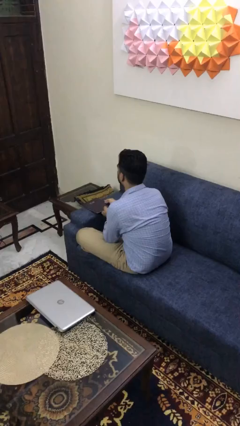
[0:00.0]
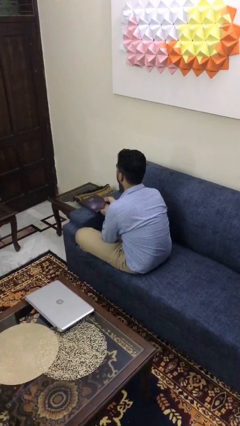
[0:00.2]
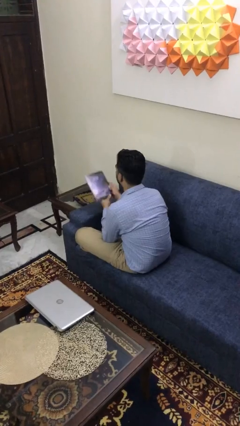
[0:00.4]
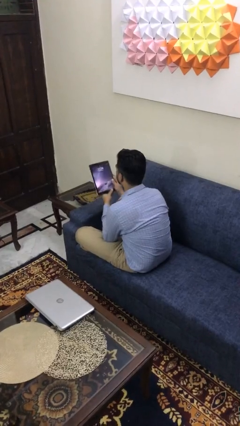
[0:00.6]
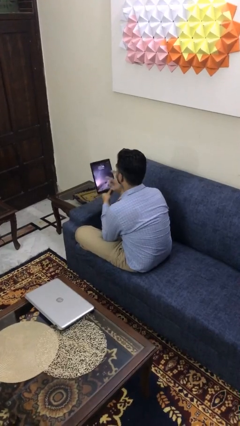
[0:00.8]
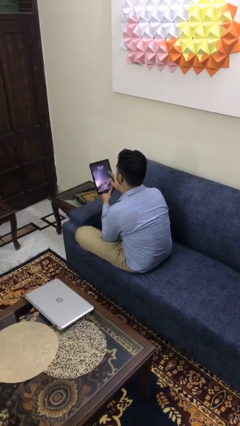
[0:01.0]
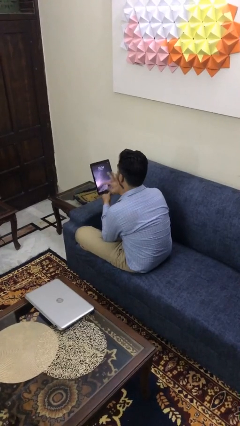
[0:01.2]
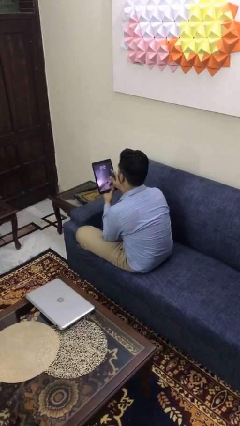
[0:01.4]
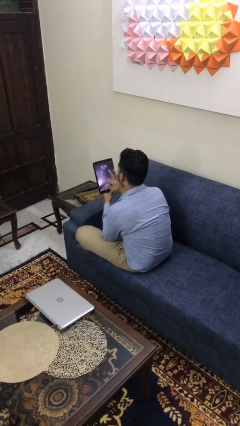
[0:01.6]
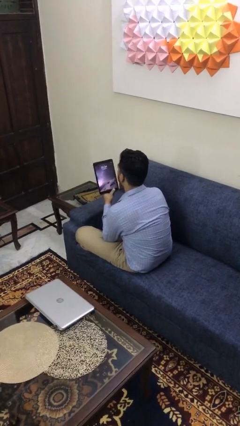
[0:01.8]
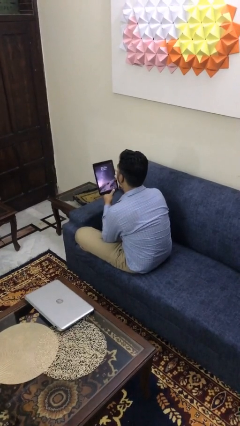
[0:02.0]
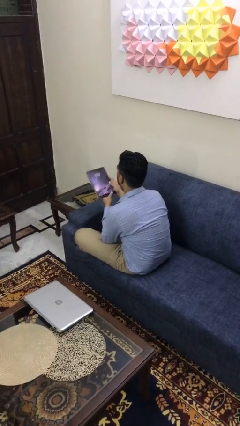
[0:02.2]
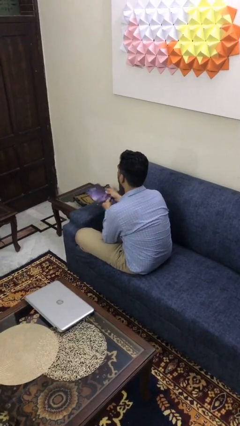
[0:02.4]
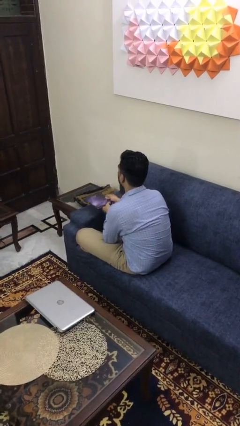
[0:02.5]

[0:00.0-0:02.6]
person interacts with tablet

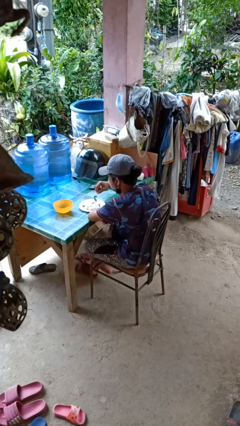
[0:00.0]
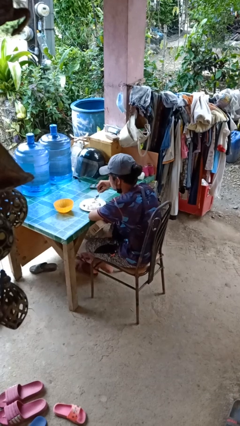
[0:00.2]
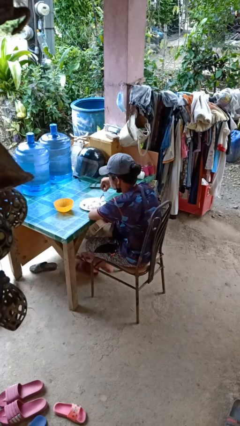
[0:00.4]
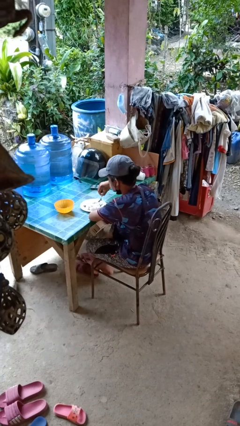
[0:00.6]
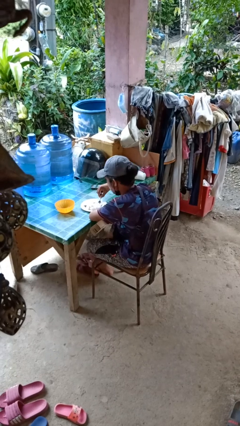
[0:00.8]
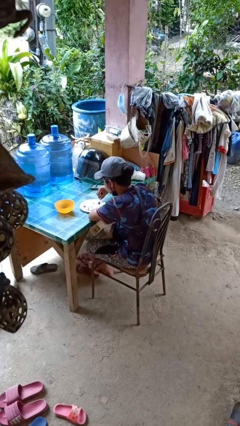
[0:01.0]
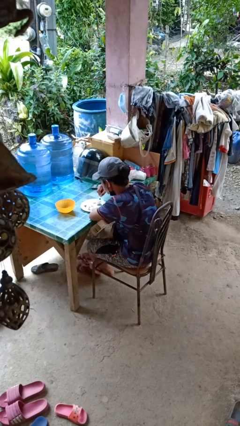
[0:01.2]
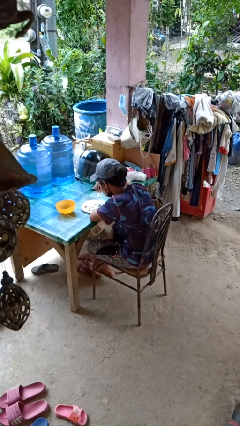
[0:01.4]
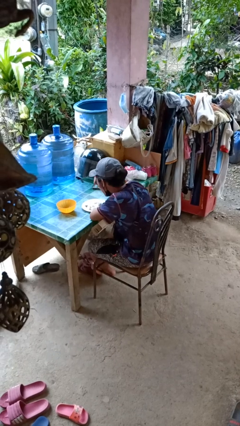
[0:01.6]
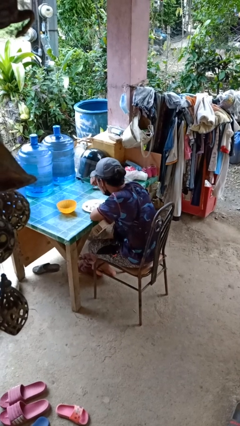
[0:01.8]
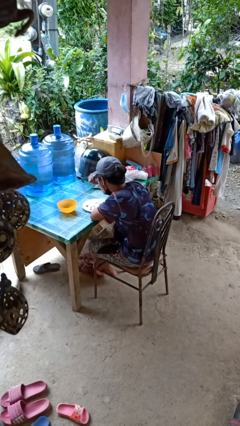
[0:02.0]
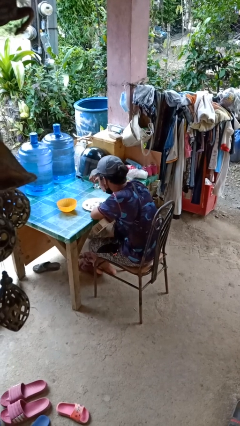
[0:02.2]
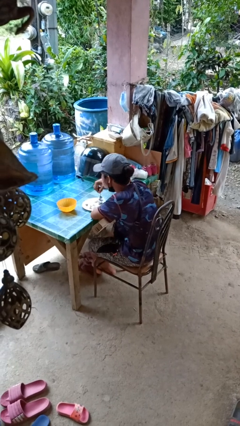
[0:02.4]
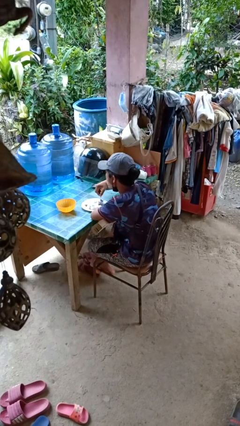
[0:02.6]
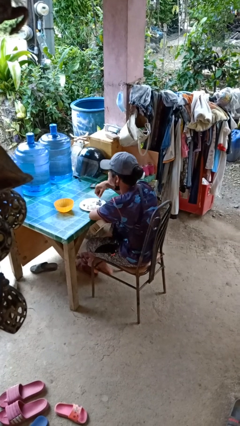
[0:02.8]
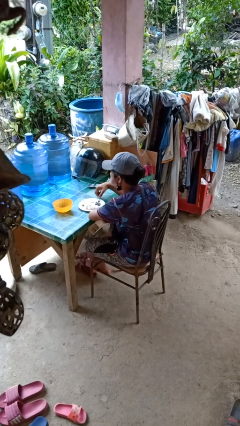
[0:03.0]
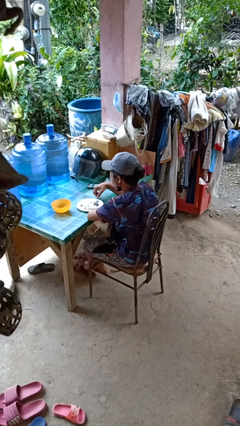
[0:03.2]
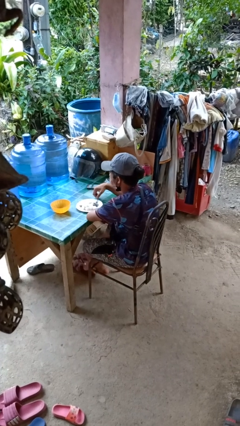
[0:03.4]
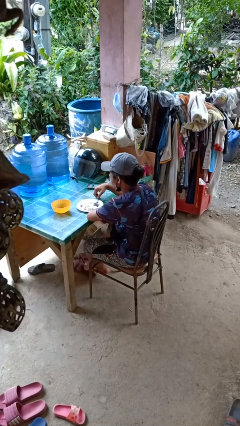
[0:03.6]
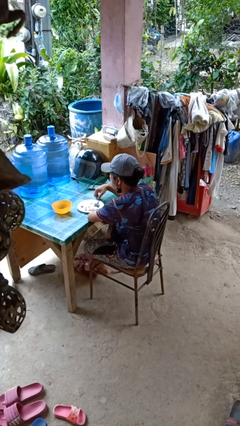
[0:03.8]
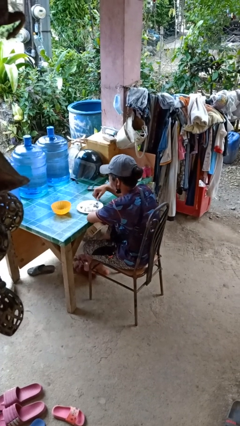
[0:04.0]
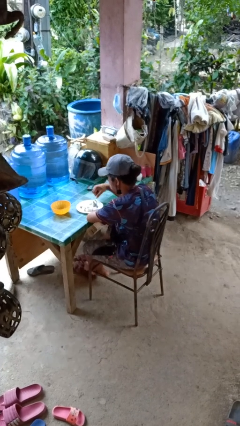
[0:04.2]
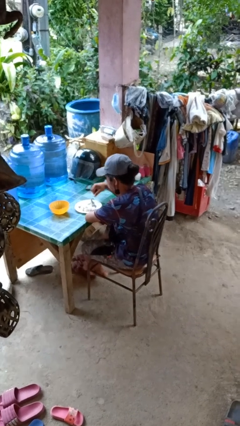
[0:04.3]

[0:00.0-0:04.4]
person eats with utensil

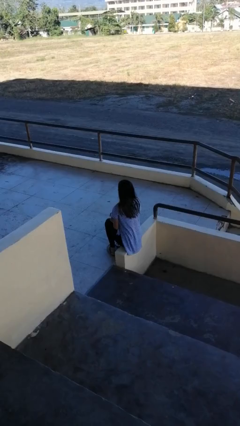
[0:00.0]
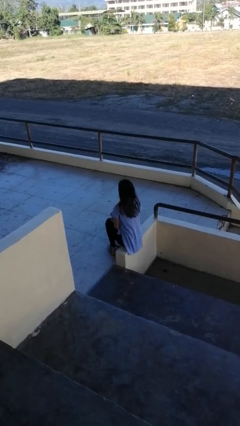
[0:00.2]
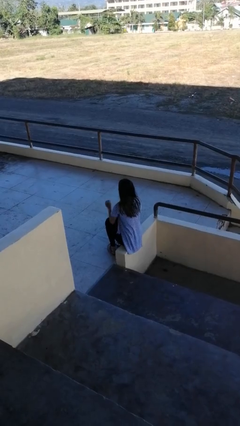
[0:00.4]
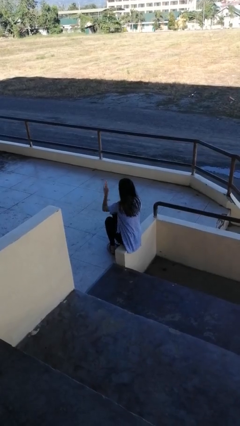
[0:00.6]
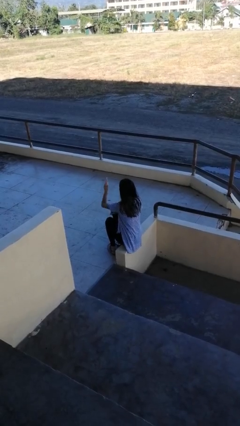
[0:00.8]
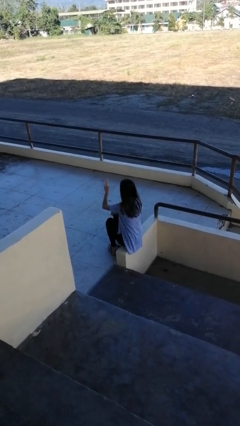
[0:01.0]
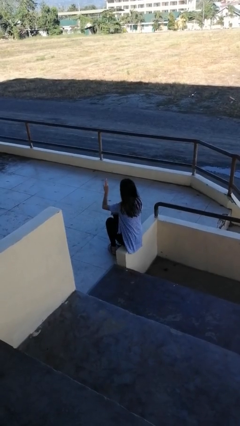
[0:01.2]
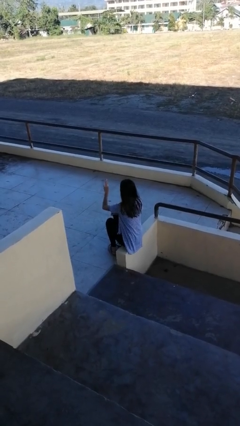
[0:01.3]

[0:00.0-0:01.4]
person gestures number three

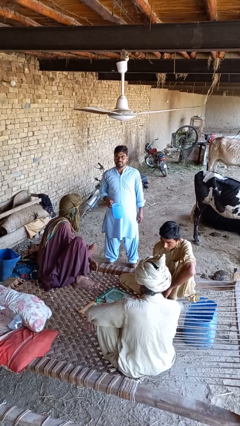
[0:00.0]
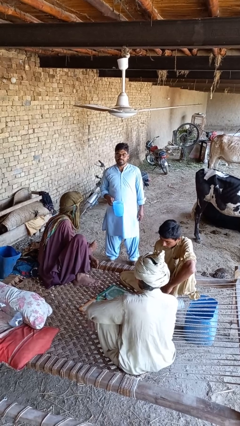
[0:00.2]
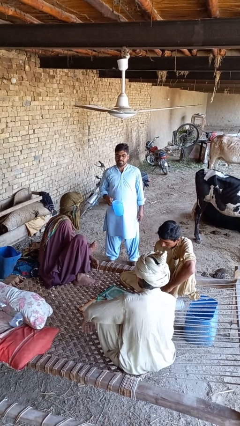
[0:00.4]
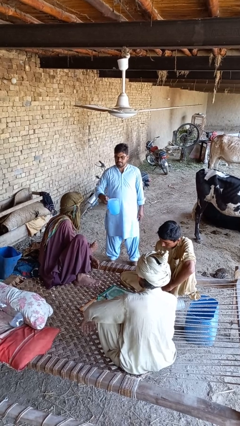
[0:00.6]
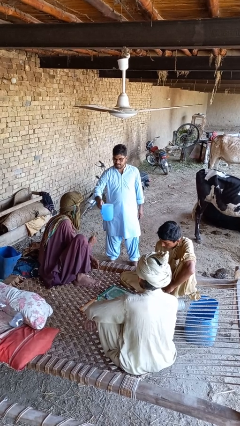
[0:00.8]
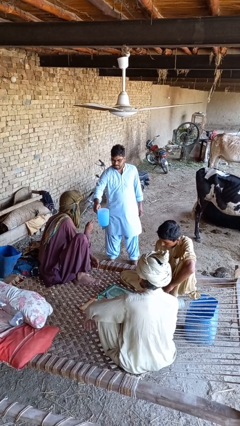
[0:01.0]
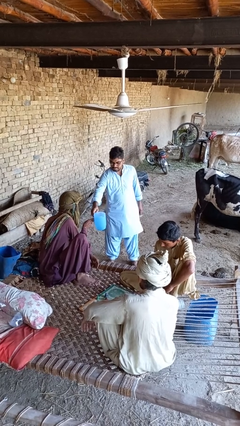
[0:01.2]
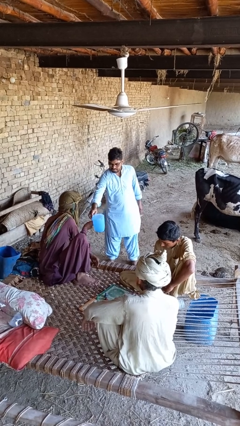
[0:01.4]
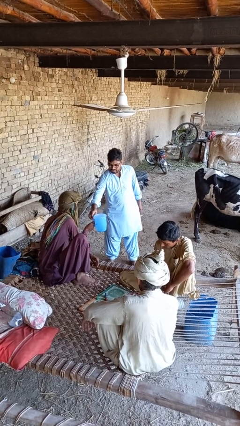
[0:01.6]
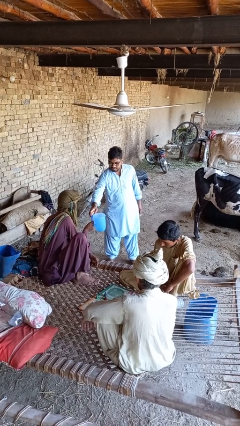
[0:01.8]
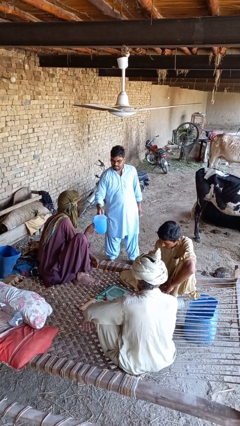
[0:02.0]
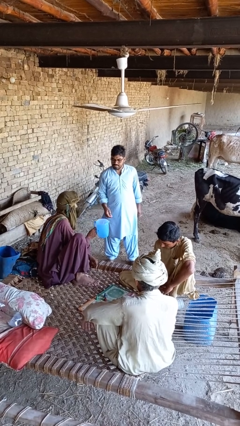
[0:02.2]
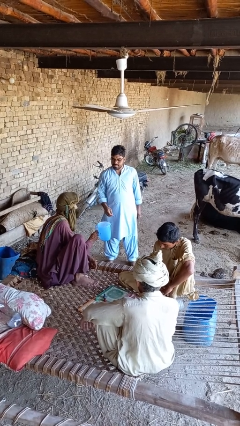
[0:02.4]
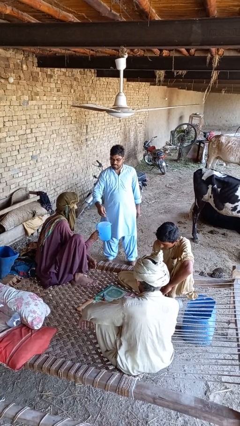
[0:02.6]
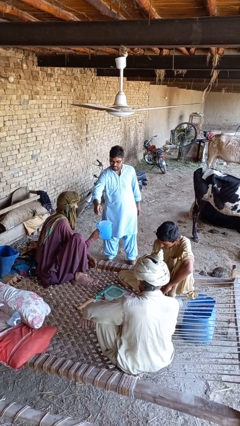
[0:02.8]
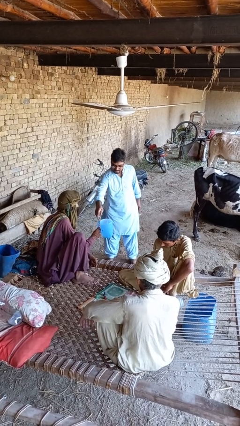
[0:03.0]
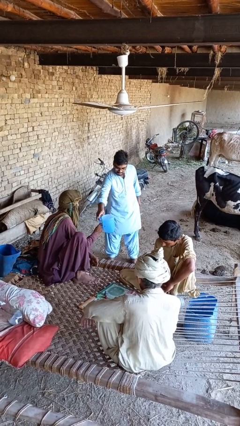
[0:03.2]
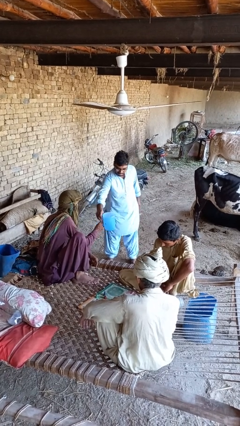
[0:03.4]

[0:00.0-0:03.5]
person transfers object to person

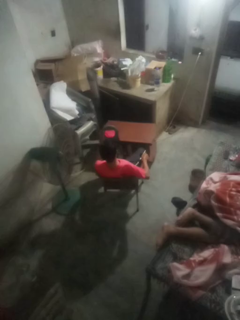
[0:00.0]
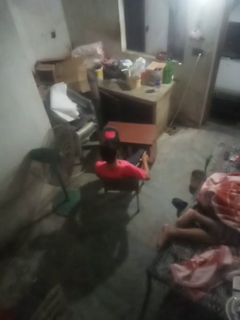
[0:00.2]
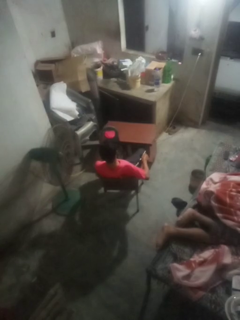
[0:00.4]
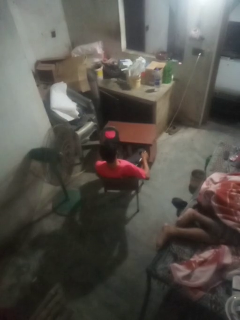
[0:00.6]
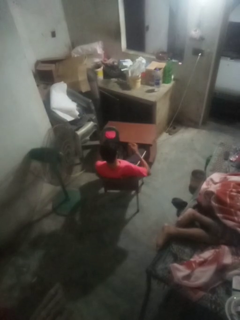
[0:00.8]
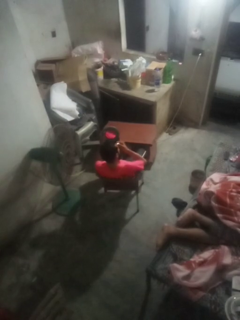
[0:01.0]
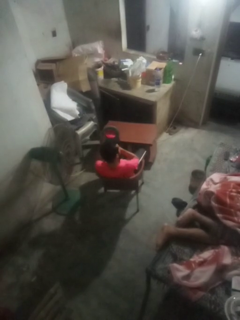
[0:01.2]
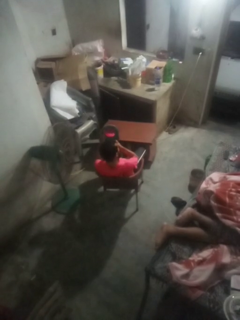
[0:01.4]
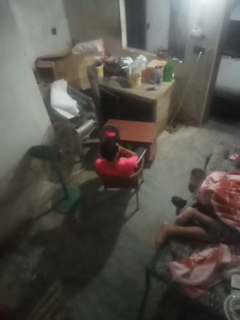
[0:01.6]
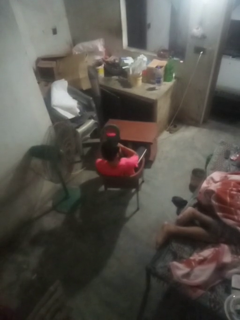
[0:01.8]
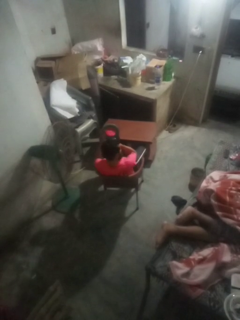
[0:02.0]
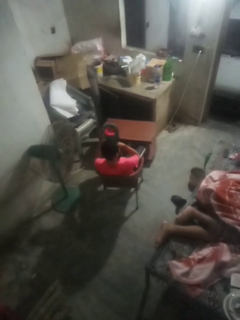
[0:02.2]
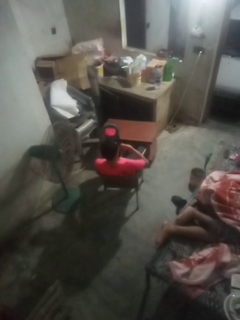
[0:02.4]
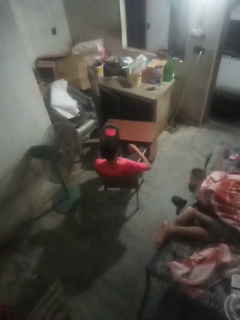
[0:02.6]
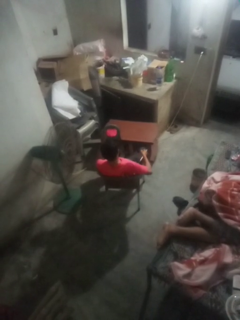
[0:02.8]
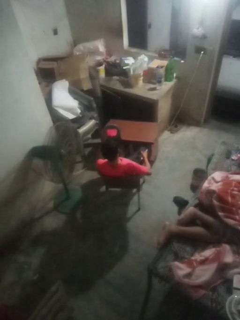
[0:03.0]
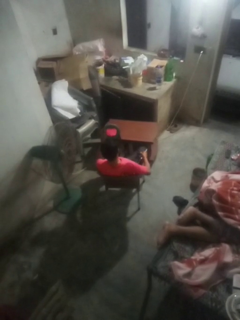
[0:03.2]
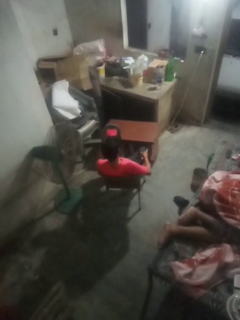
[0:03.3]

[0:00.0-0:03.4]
person applies foundation makeup

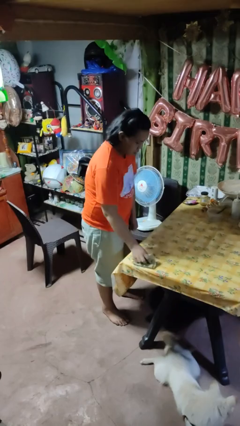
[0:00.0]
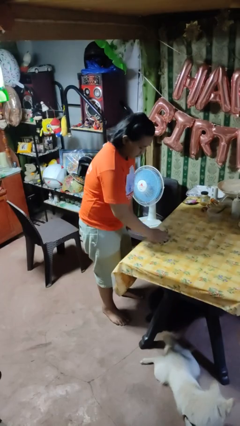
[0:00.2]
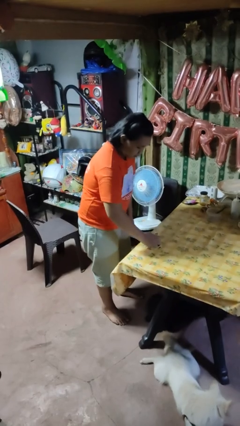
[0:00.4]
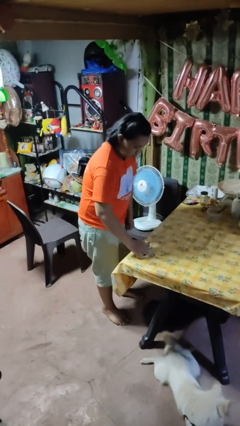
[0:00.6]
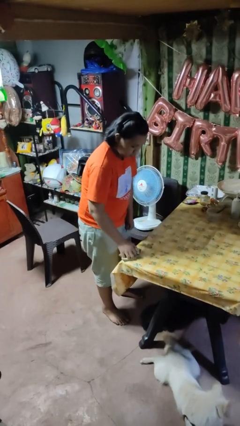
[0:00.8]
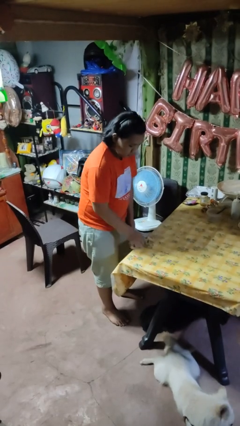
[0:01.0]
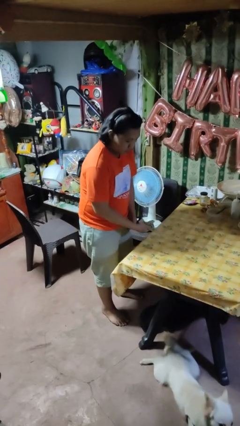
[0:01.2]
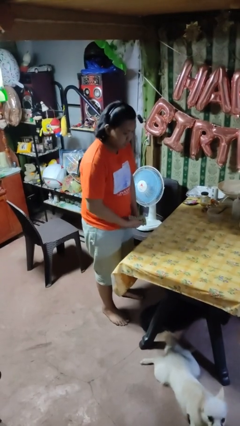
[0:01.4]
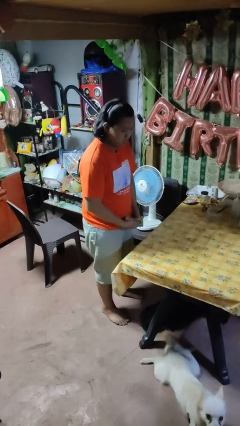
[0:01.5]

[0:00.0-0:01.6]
person cleans table with rag

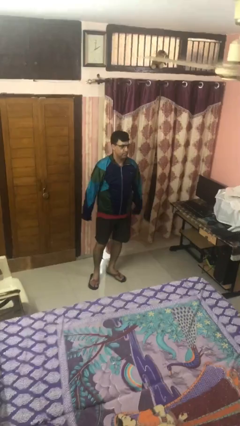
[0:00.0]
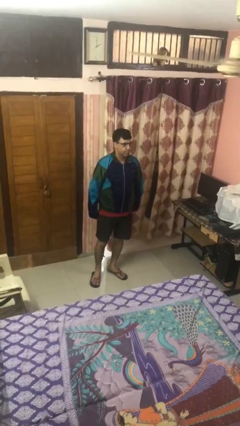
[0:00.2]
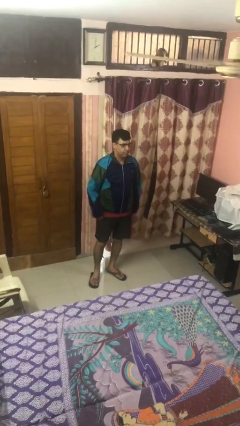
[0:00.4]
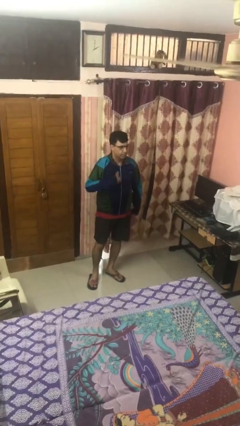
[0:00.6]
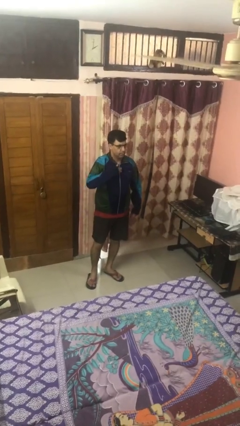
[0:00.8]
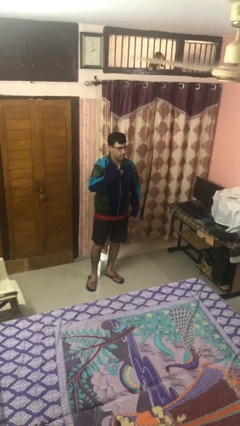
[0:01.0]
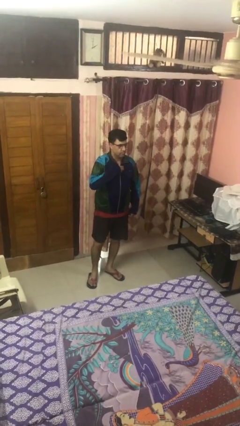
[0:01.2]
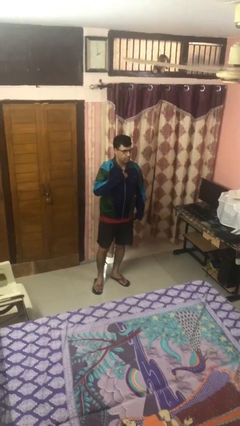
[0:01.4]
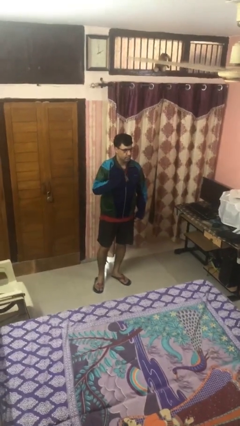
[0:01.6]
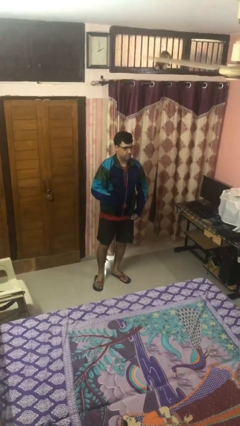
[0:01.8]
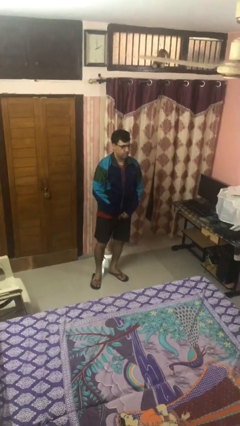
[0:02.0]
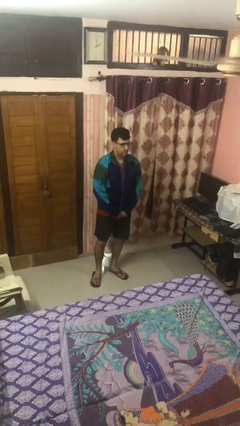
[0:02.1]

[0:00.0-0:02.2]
person unzips jacket
